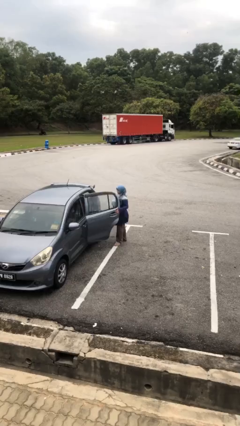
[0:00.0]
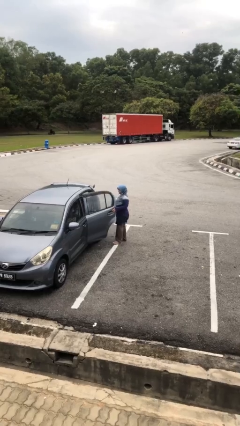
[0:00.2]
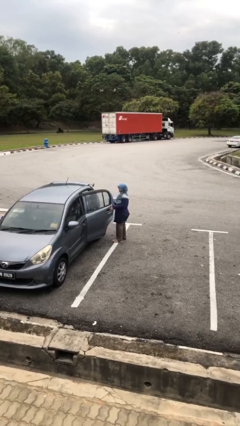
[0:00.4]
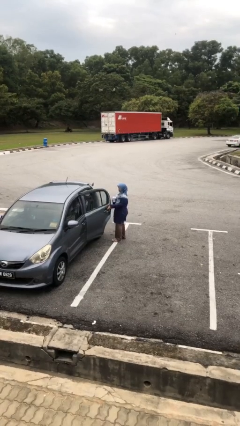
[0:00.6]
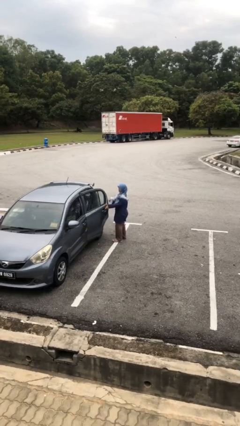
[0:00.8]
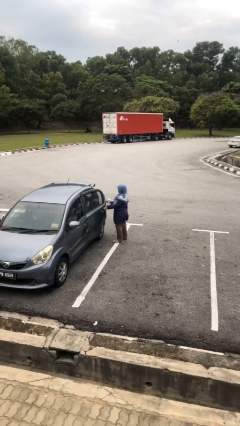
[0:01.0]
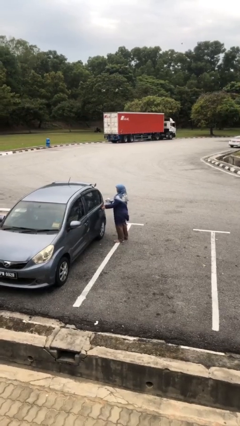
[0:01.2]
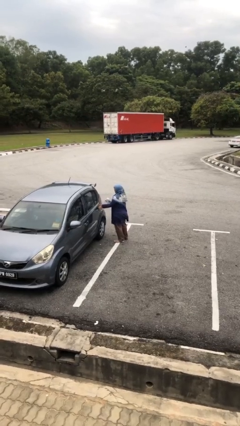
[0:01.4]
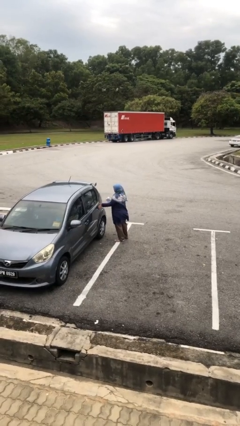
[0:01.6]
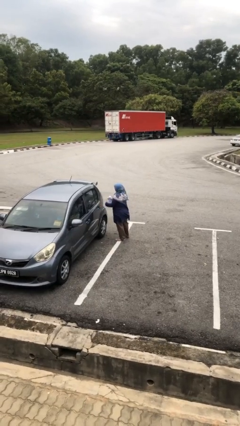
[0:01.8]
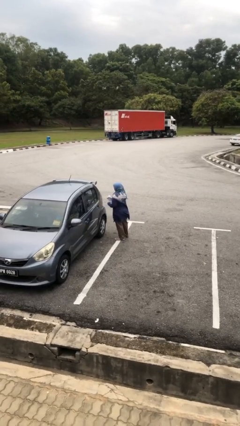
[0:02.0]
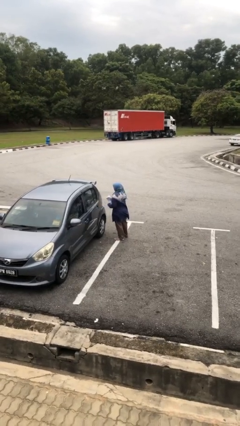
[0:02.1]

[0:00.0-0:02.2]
person closes car door

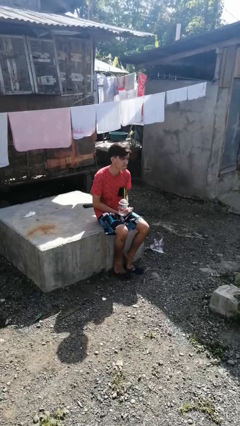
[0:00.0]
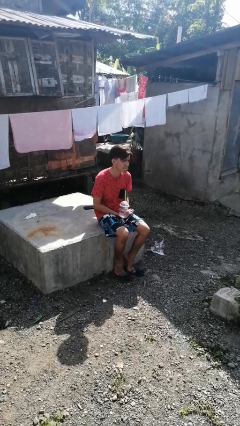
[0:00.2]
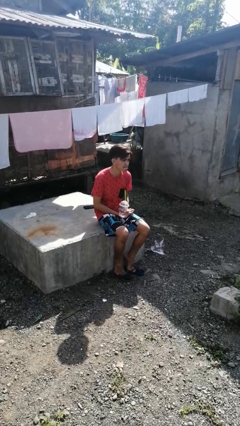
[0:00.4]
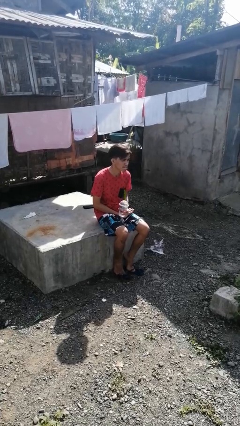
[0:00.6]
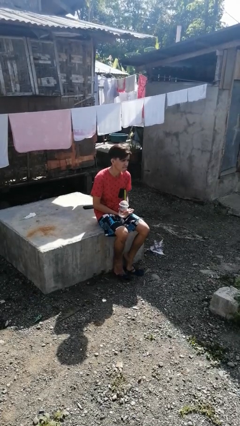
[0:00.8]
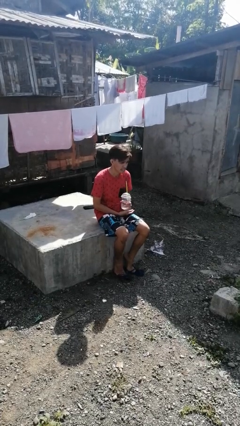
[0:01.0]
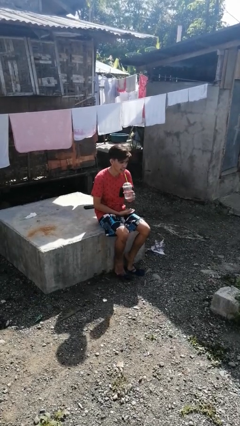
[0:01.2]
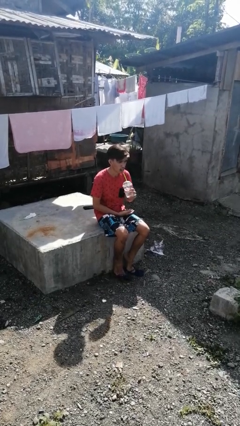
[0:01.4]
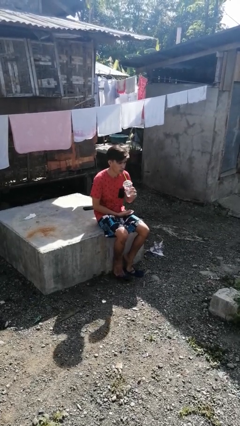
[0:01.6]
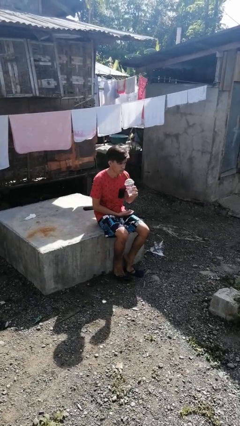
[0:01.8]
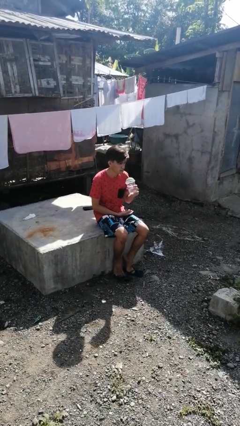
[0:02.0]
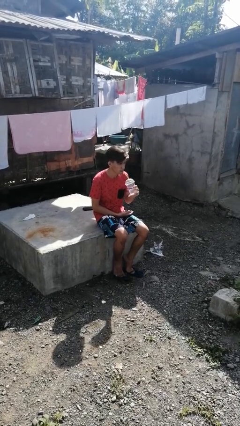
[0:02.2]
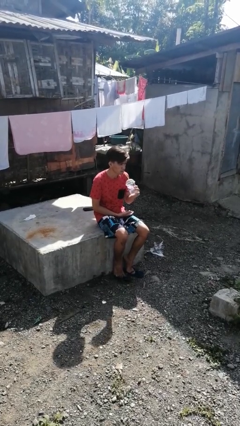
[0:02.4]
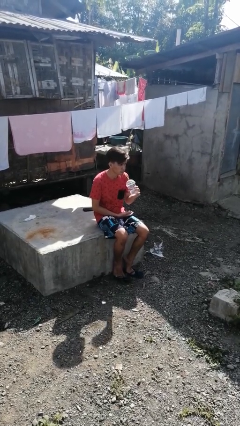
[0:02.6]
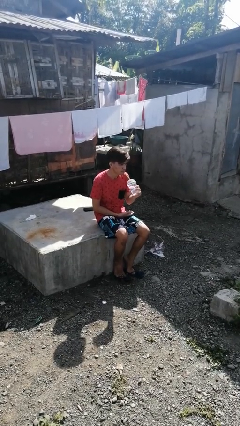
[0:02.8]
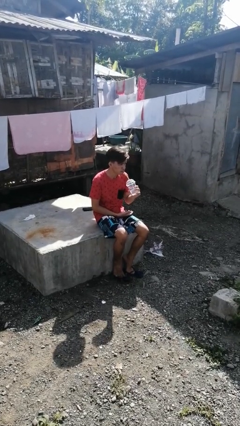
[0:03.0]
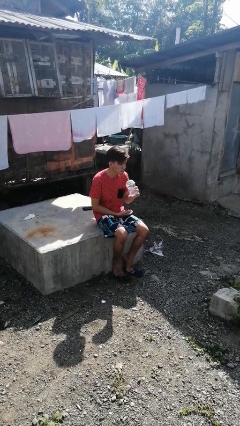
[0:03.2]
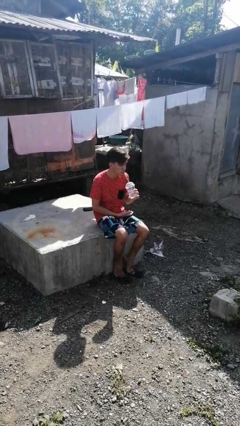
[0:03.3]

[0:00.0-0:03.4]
person drinks from straw

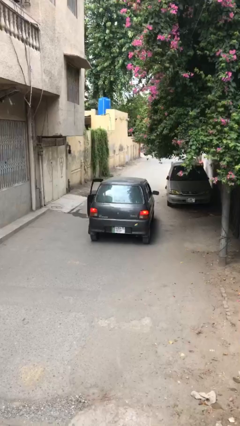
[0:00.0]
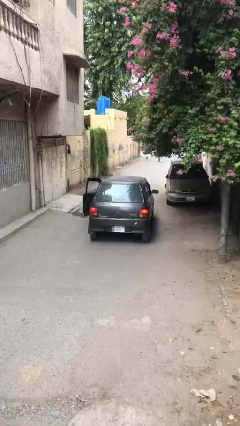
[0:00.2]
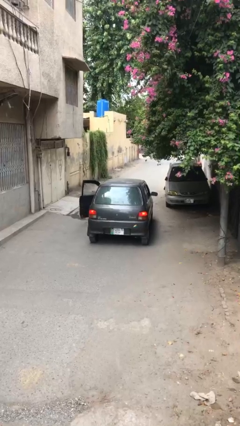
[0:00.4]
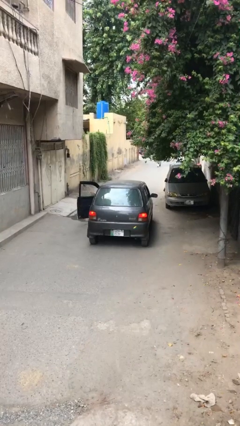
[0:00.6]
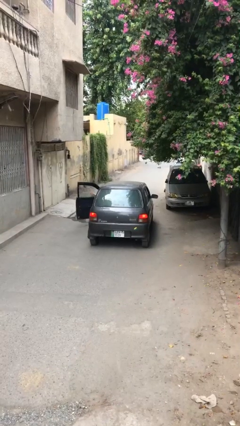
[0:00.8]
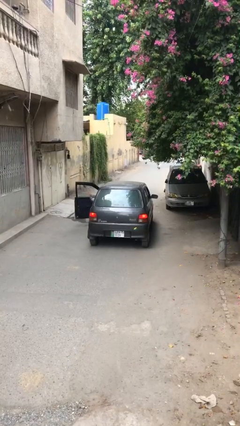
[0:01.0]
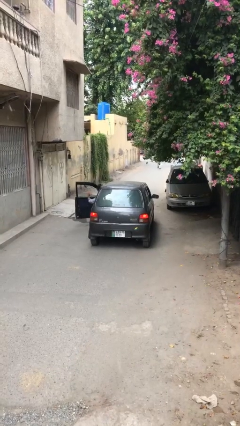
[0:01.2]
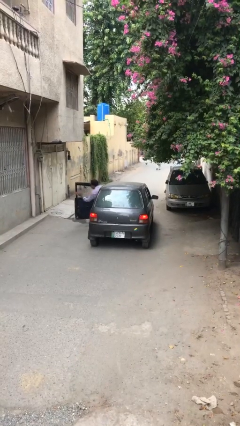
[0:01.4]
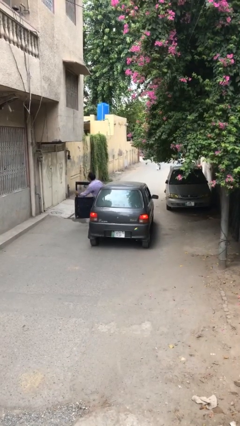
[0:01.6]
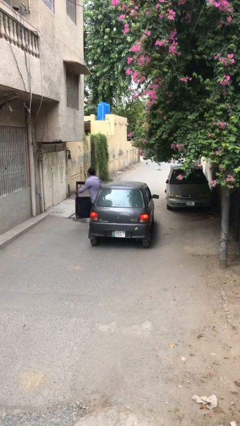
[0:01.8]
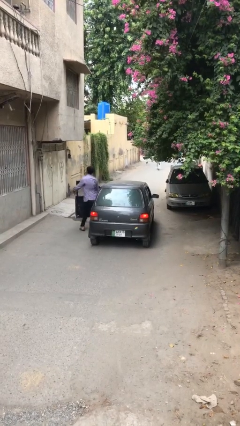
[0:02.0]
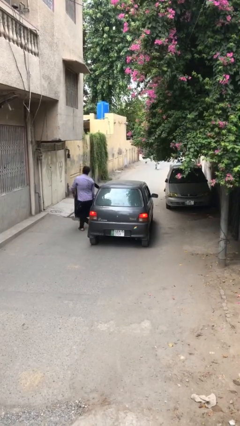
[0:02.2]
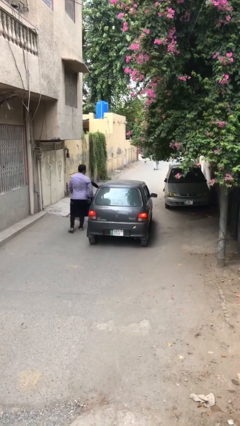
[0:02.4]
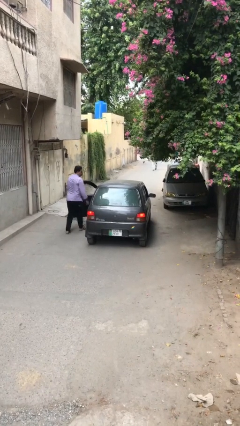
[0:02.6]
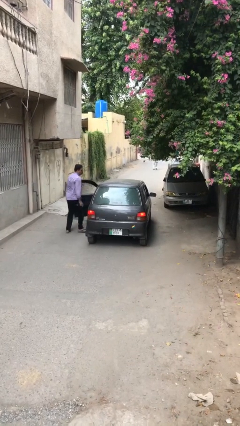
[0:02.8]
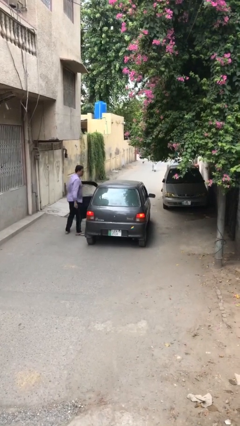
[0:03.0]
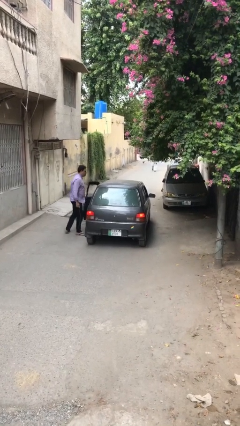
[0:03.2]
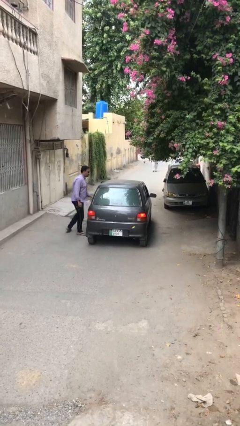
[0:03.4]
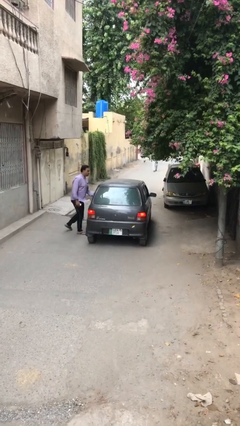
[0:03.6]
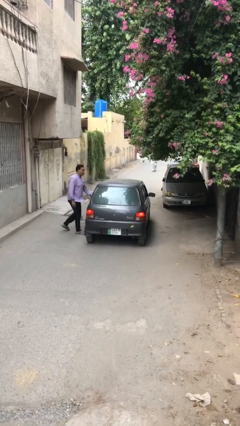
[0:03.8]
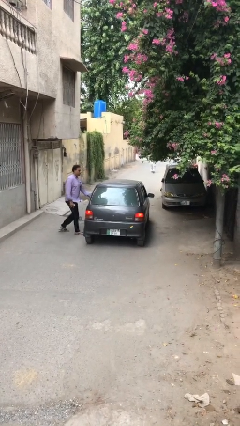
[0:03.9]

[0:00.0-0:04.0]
car drops off person

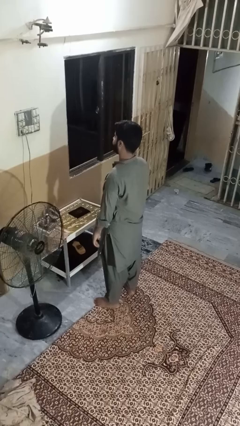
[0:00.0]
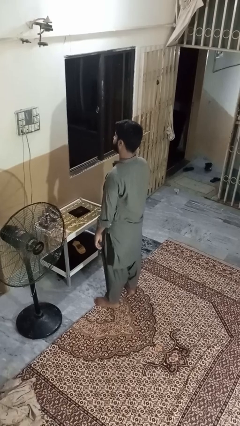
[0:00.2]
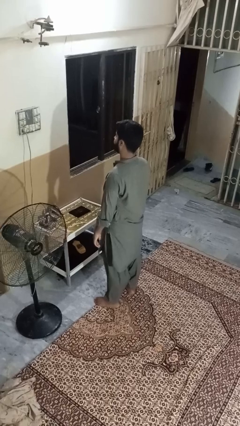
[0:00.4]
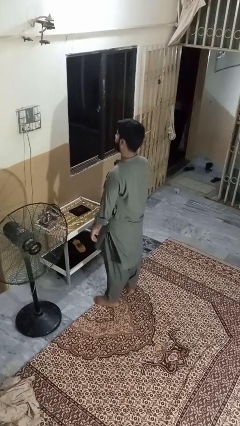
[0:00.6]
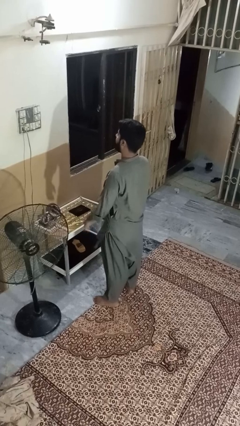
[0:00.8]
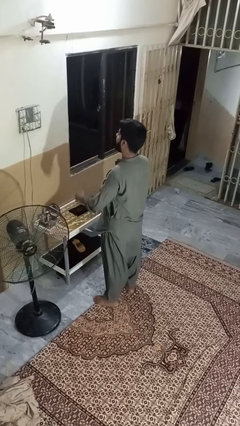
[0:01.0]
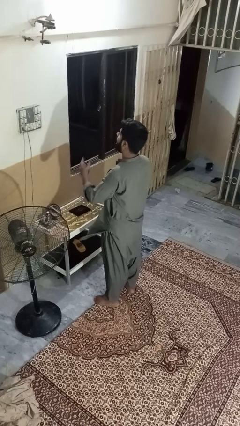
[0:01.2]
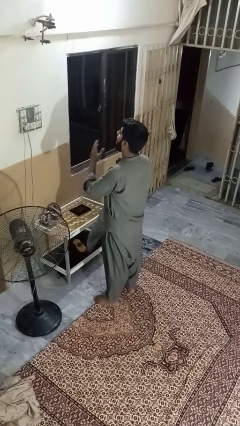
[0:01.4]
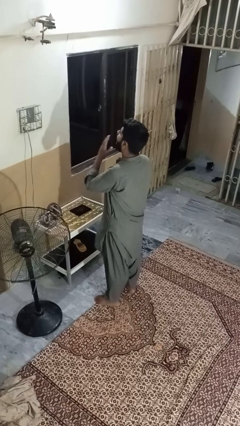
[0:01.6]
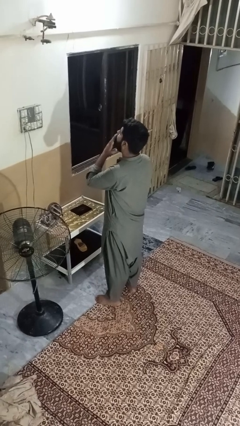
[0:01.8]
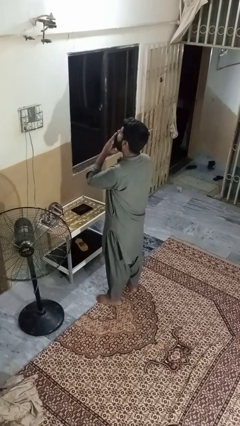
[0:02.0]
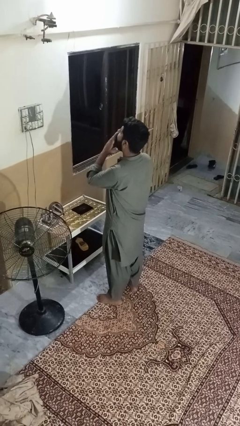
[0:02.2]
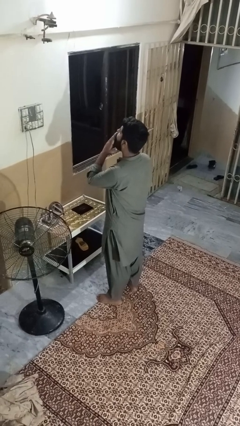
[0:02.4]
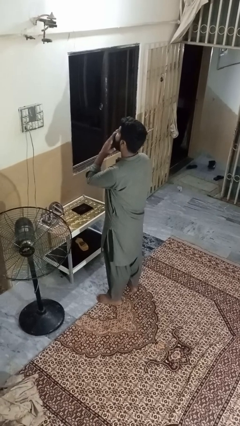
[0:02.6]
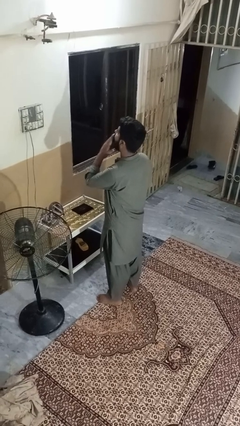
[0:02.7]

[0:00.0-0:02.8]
person yawns

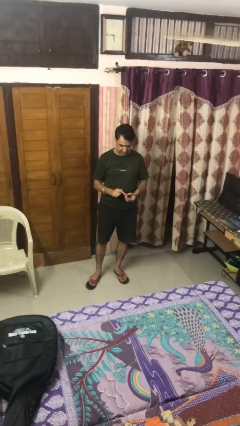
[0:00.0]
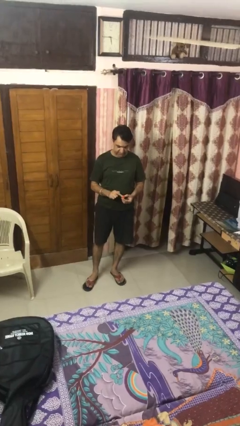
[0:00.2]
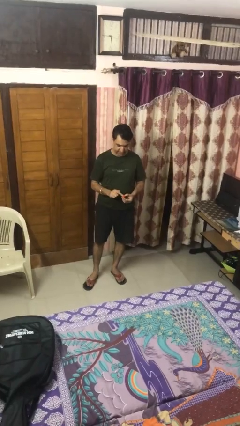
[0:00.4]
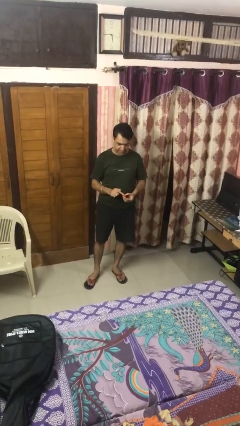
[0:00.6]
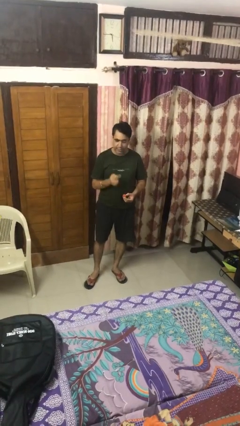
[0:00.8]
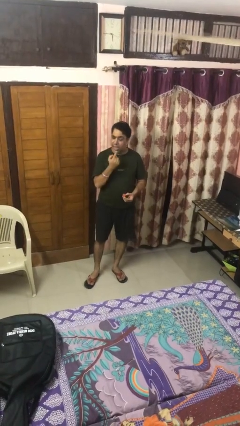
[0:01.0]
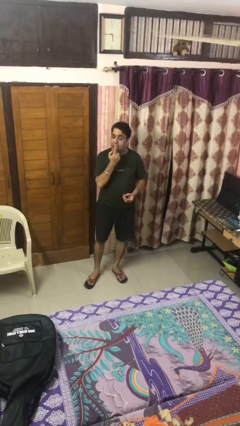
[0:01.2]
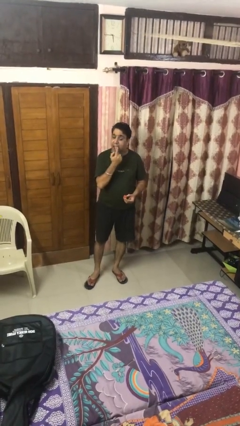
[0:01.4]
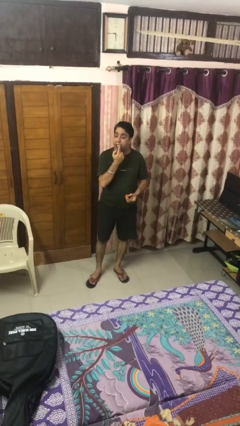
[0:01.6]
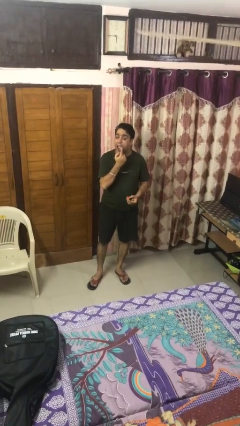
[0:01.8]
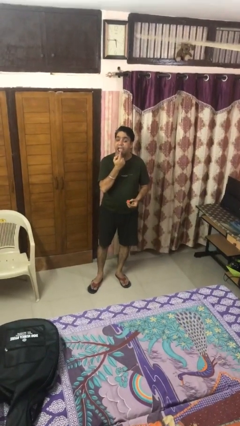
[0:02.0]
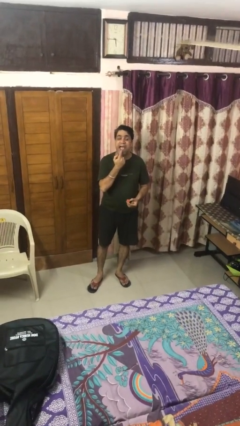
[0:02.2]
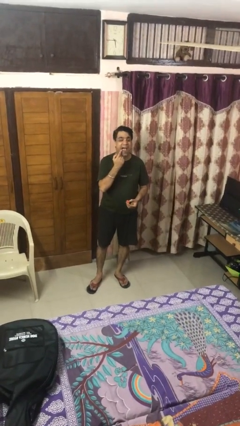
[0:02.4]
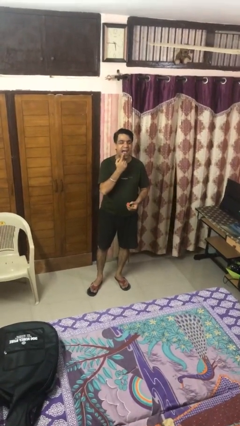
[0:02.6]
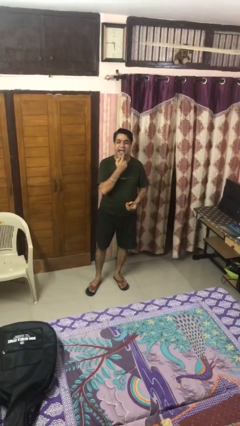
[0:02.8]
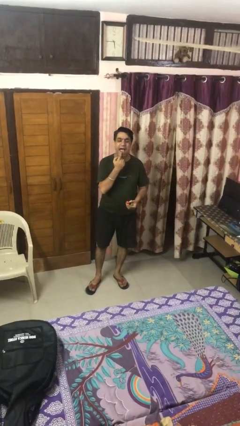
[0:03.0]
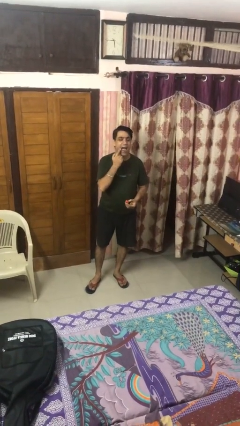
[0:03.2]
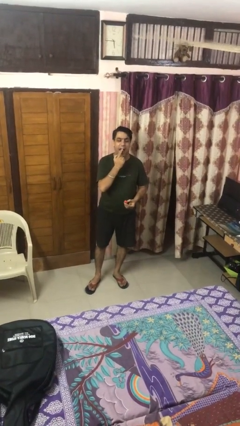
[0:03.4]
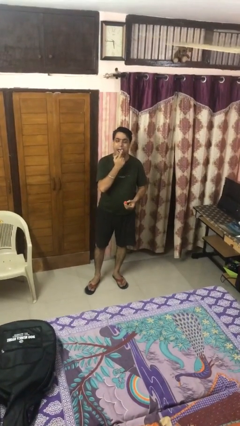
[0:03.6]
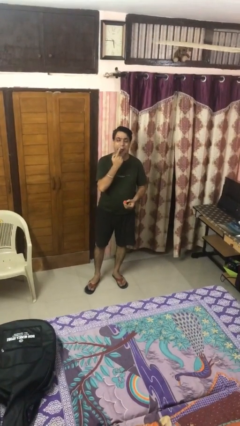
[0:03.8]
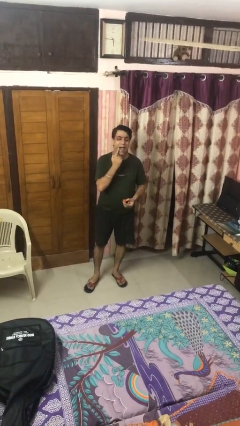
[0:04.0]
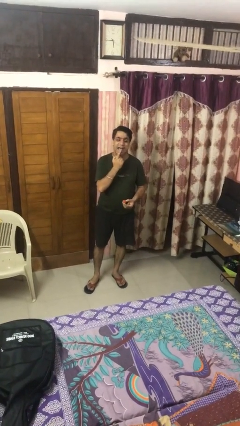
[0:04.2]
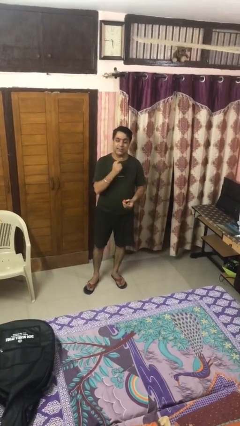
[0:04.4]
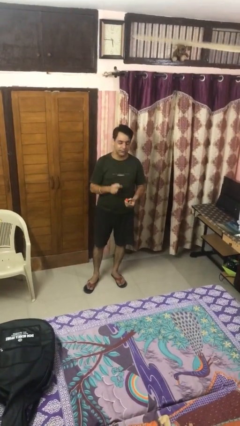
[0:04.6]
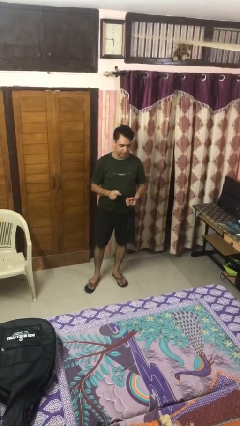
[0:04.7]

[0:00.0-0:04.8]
person applies lip makeup

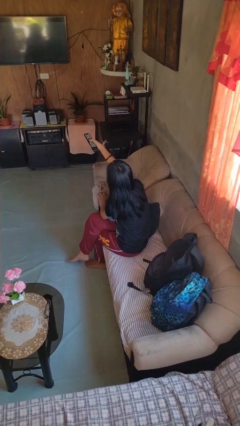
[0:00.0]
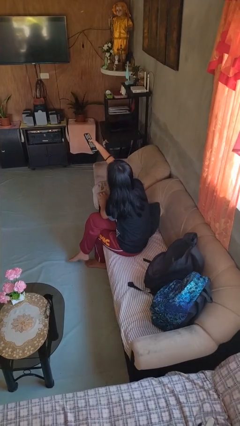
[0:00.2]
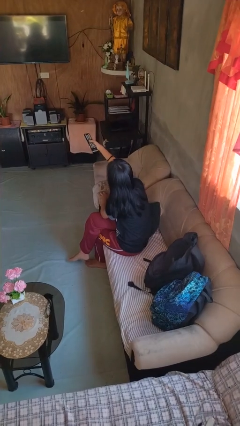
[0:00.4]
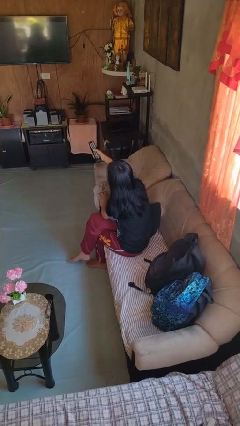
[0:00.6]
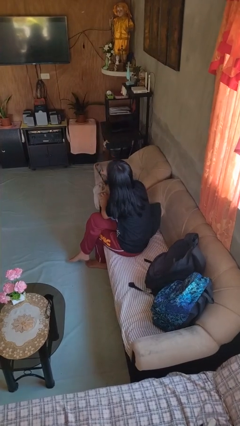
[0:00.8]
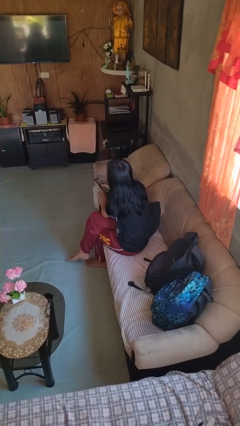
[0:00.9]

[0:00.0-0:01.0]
person uses television remote
